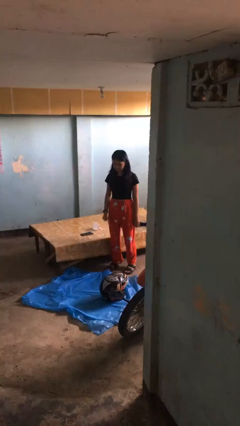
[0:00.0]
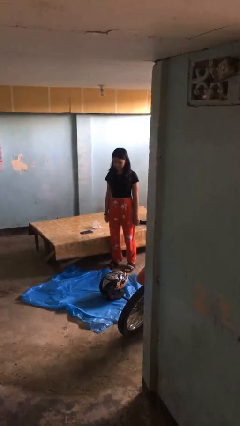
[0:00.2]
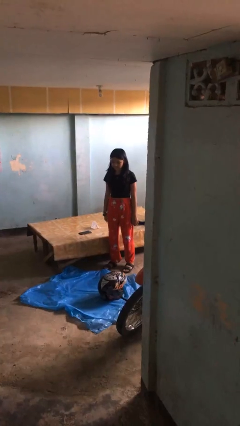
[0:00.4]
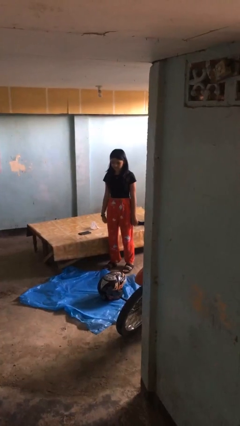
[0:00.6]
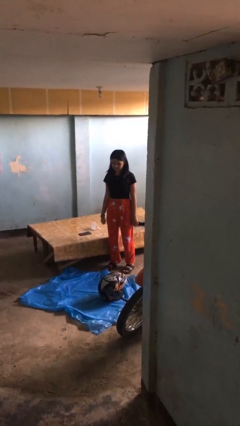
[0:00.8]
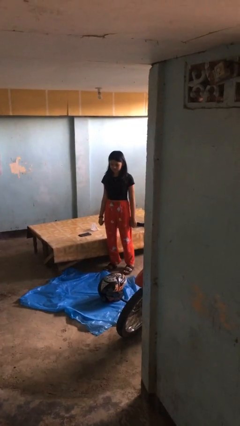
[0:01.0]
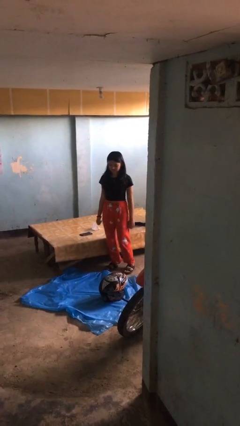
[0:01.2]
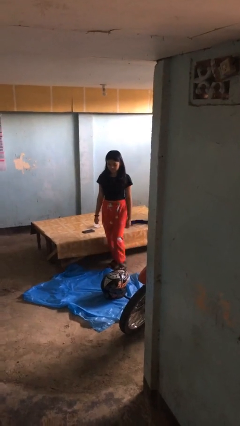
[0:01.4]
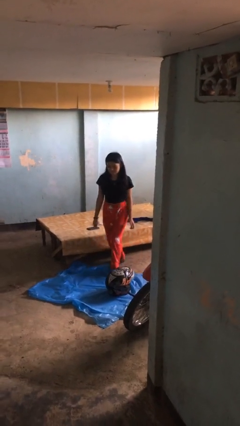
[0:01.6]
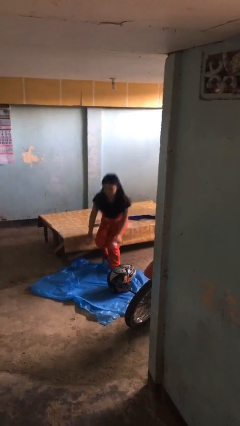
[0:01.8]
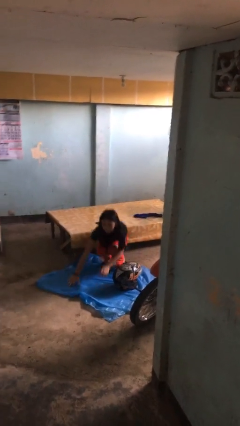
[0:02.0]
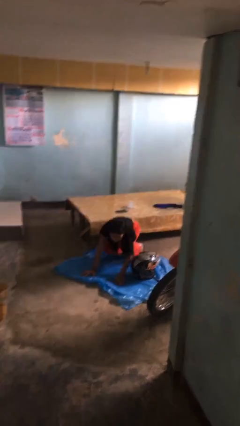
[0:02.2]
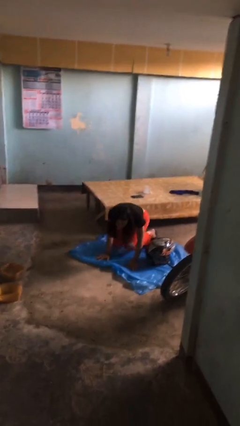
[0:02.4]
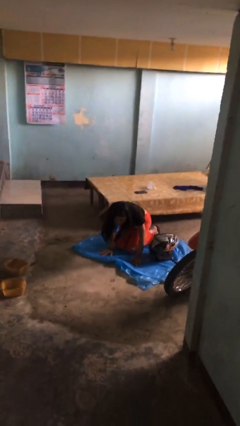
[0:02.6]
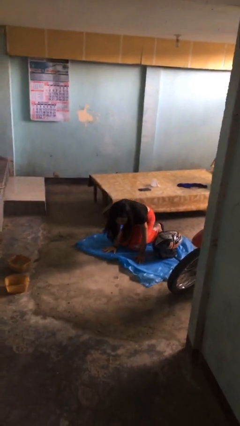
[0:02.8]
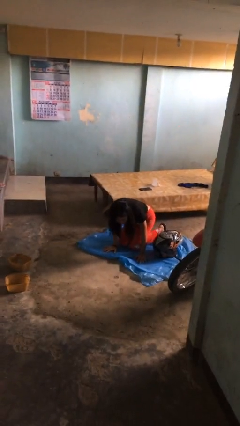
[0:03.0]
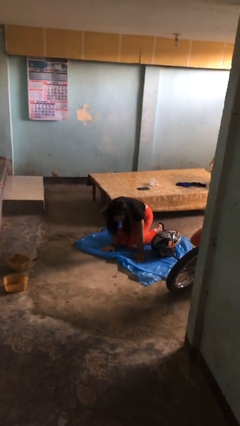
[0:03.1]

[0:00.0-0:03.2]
person trips on object on floor

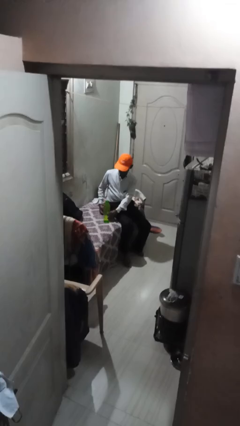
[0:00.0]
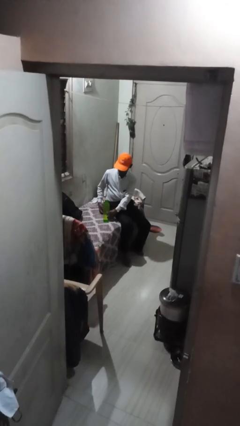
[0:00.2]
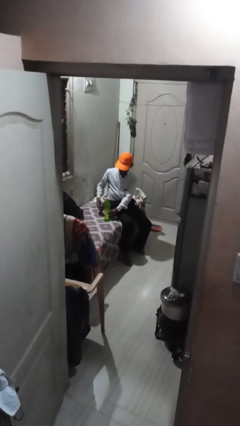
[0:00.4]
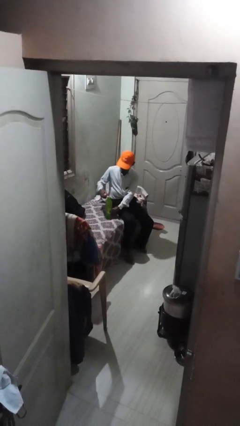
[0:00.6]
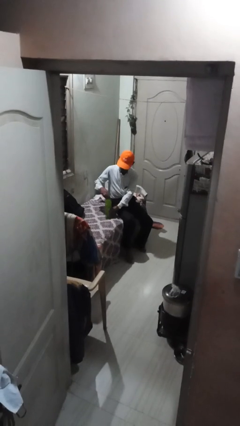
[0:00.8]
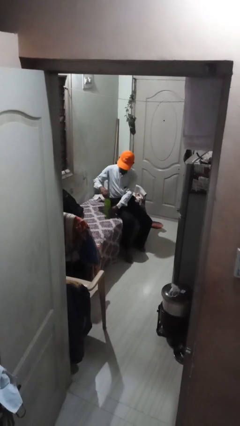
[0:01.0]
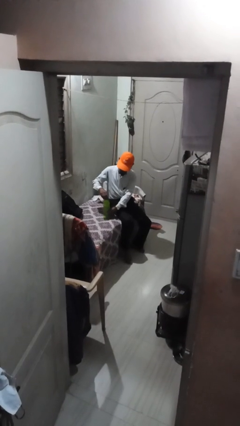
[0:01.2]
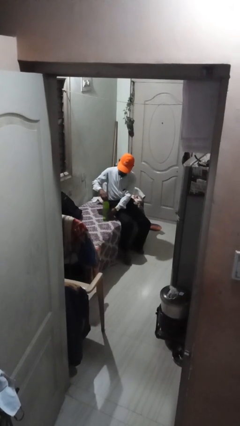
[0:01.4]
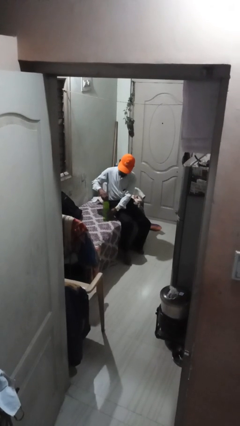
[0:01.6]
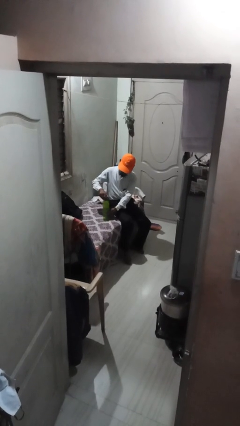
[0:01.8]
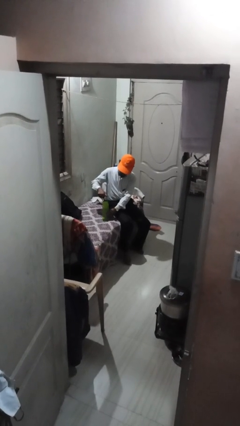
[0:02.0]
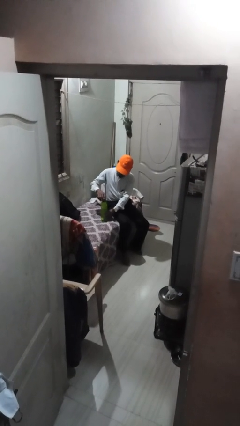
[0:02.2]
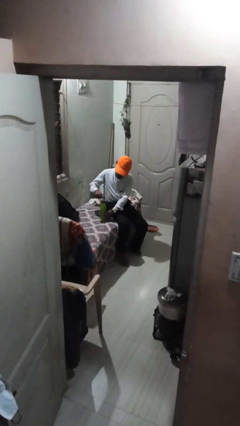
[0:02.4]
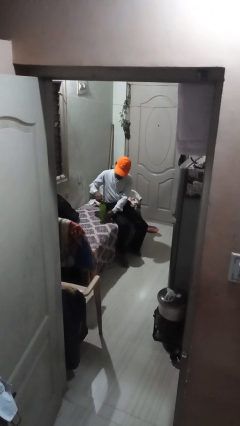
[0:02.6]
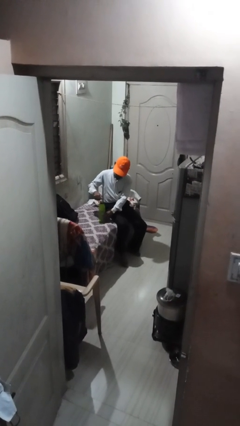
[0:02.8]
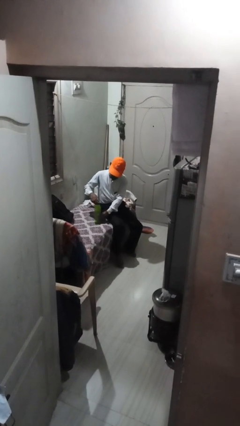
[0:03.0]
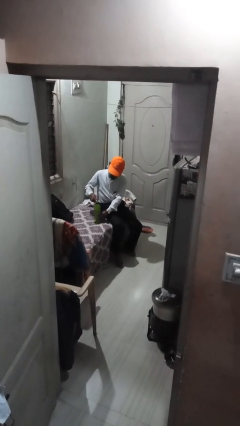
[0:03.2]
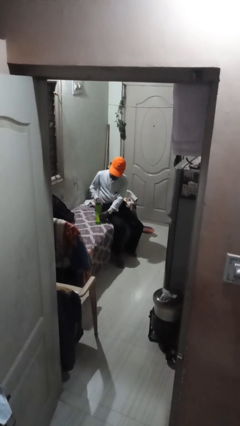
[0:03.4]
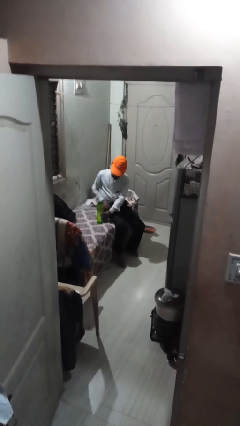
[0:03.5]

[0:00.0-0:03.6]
person screws lid to bottle

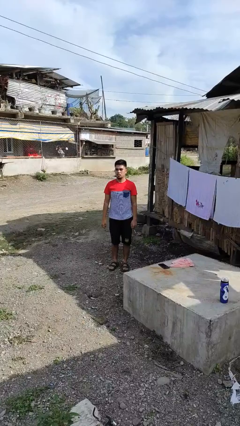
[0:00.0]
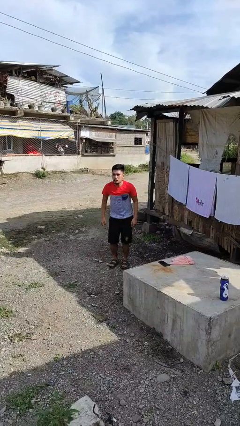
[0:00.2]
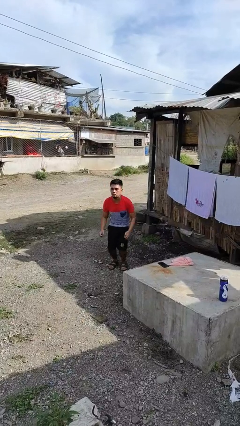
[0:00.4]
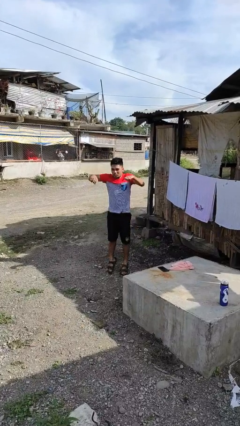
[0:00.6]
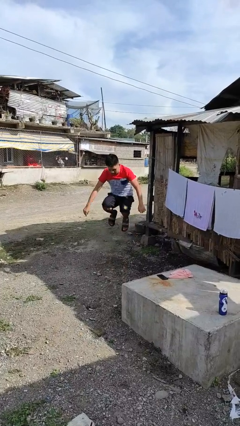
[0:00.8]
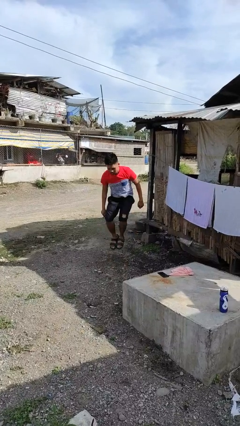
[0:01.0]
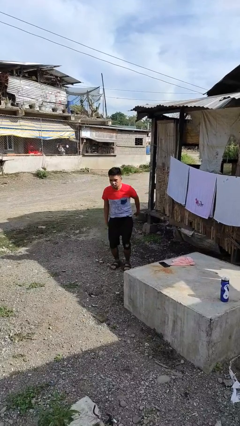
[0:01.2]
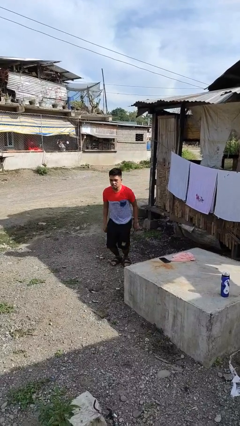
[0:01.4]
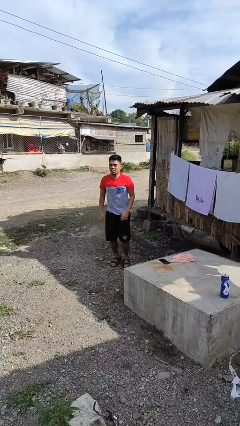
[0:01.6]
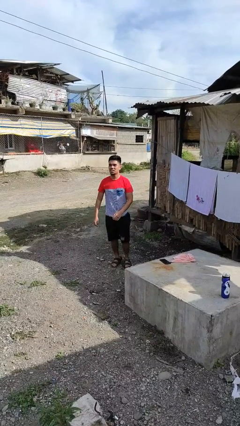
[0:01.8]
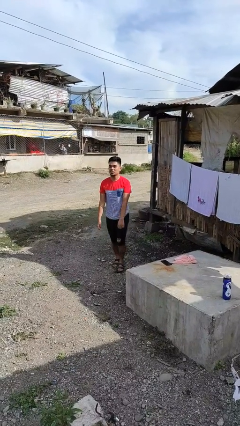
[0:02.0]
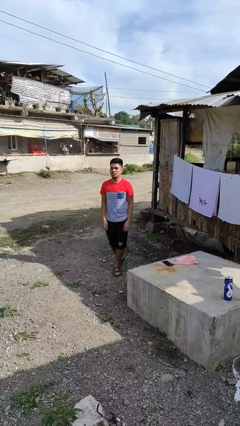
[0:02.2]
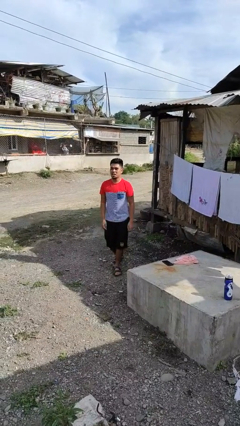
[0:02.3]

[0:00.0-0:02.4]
person jumps

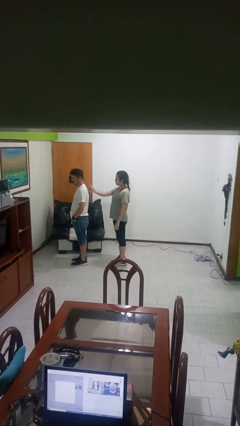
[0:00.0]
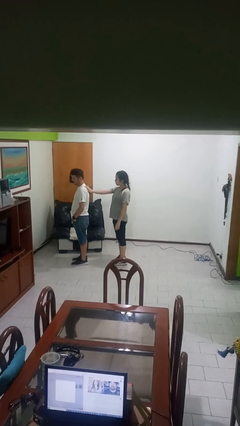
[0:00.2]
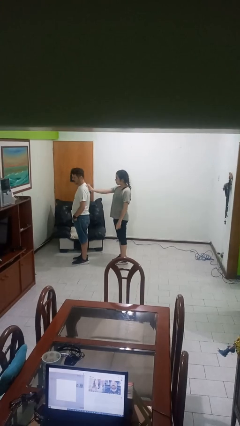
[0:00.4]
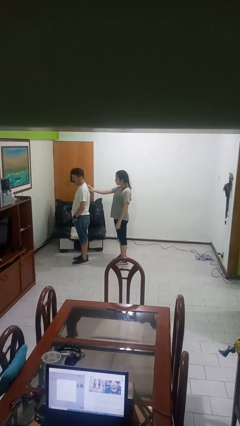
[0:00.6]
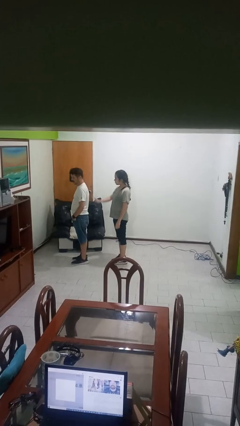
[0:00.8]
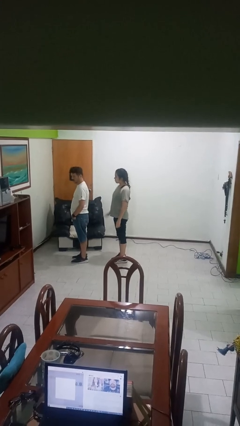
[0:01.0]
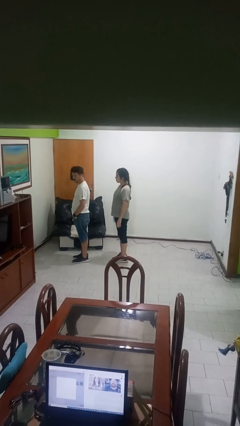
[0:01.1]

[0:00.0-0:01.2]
person touches back of person

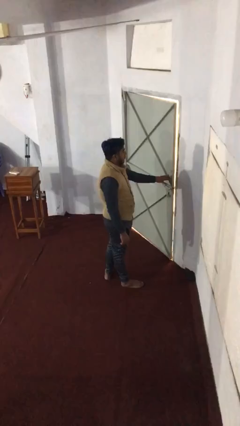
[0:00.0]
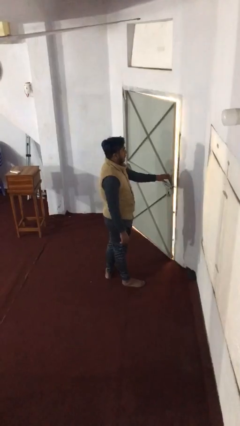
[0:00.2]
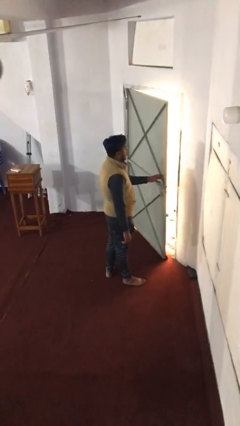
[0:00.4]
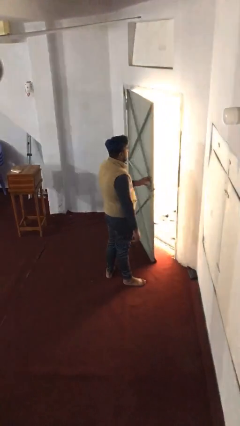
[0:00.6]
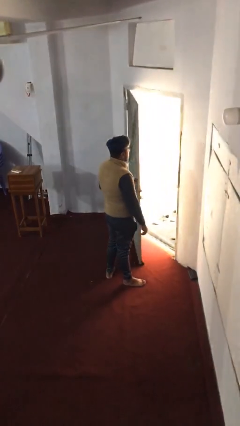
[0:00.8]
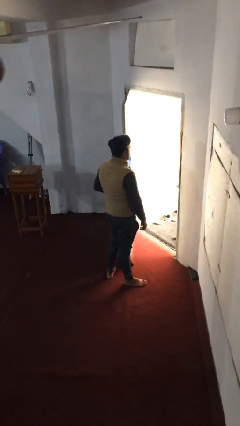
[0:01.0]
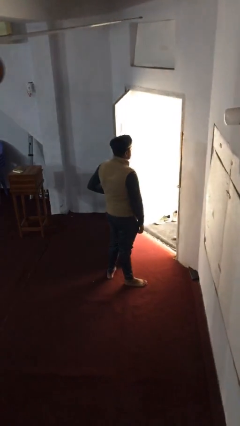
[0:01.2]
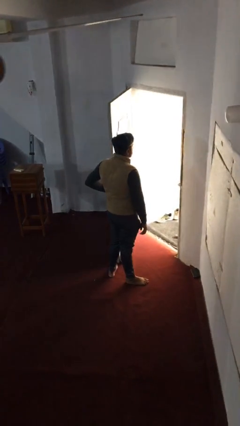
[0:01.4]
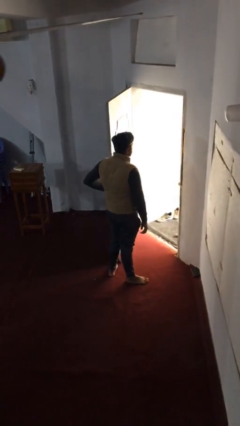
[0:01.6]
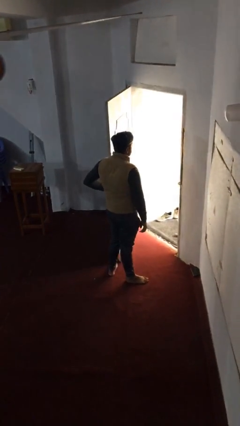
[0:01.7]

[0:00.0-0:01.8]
person opens facility door

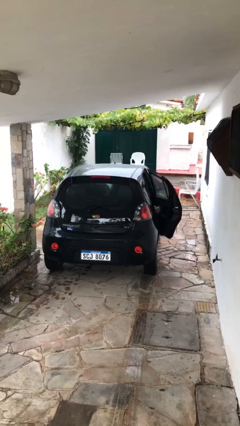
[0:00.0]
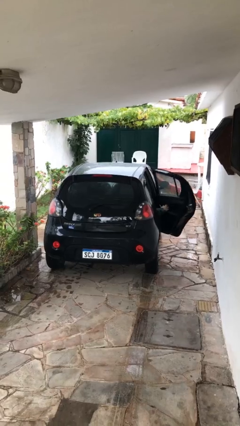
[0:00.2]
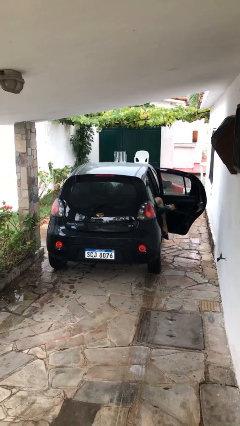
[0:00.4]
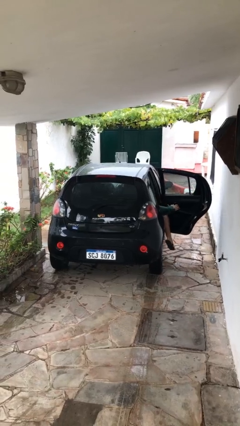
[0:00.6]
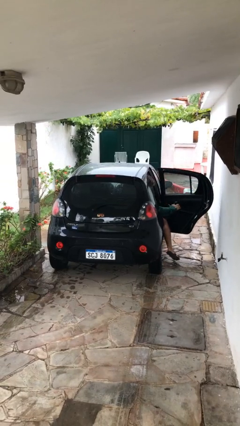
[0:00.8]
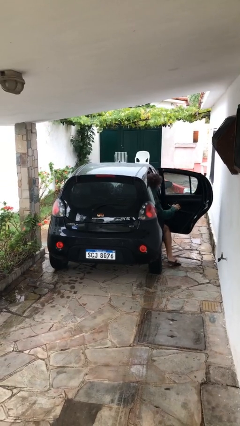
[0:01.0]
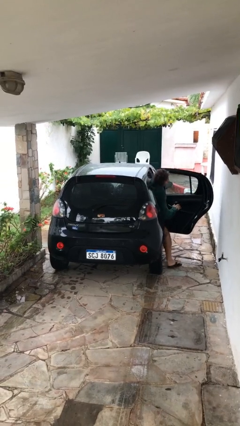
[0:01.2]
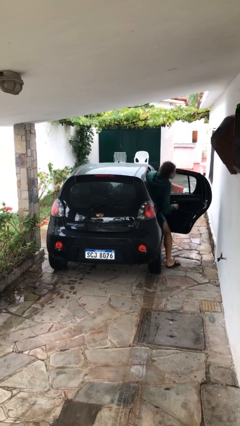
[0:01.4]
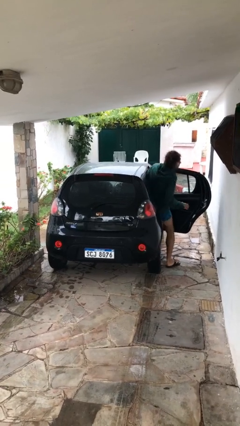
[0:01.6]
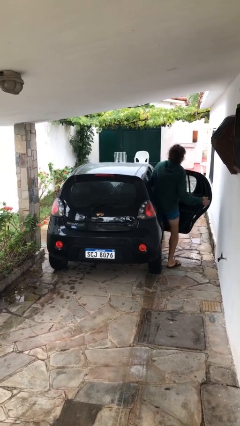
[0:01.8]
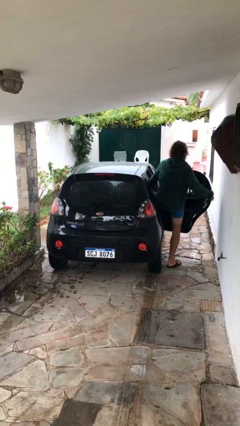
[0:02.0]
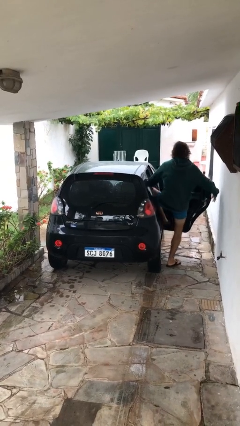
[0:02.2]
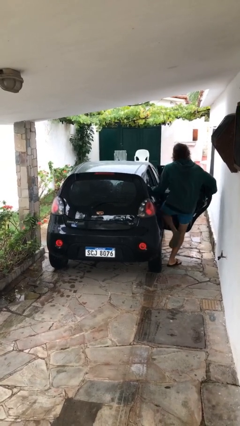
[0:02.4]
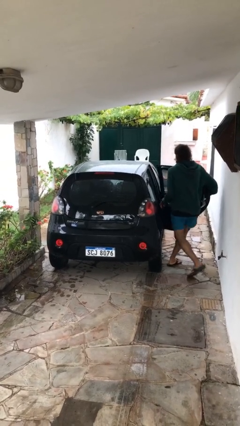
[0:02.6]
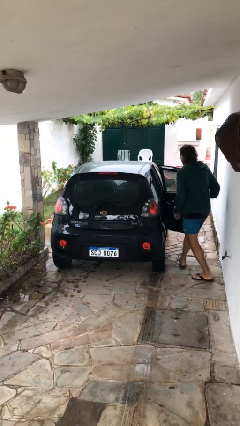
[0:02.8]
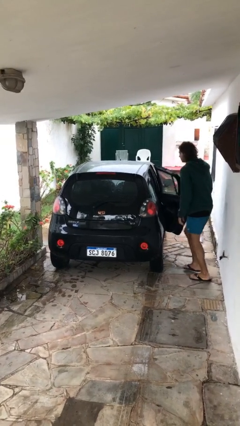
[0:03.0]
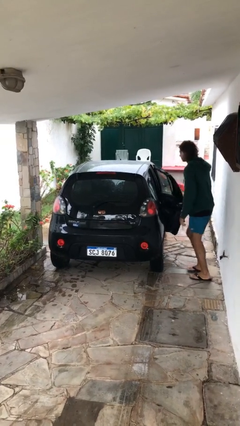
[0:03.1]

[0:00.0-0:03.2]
car drops off person

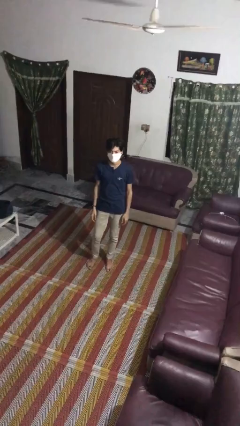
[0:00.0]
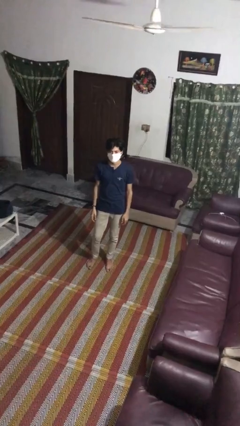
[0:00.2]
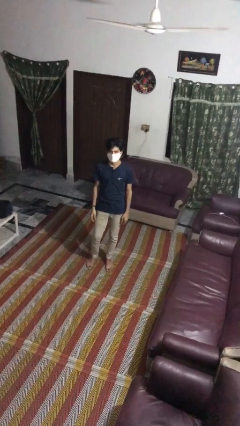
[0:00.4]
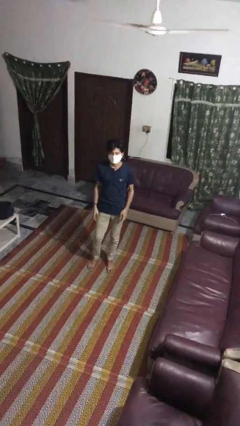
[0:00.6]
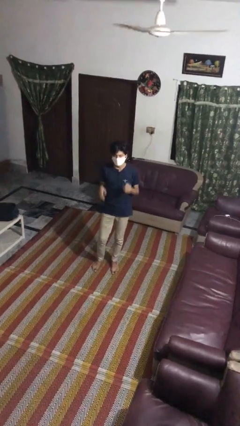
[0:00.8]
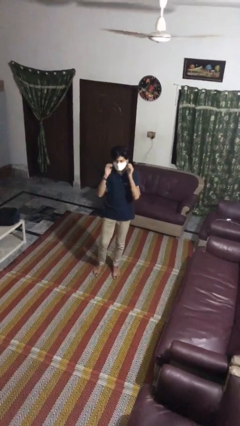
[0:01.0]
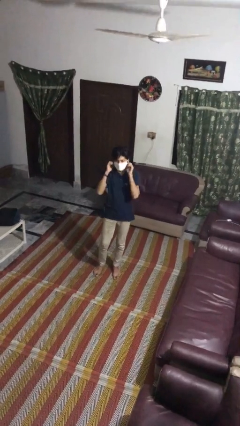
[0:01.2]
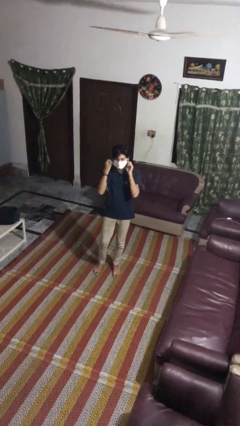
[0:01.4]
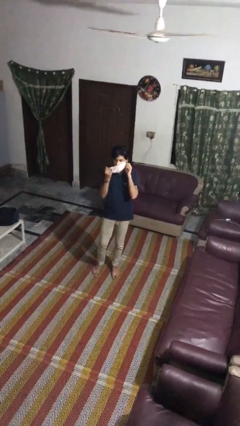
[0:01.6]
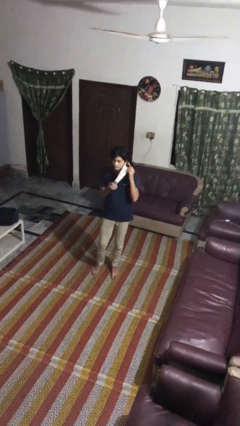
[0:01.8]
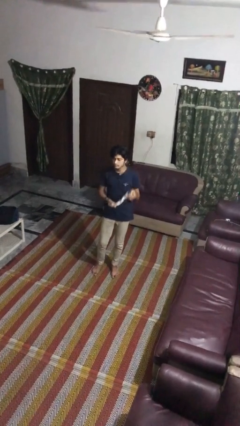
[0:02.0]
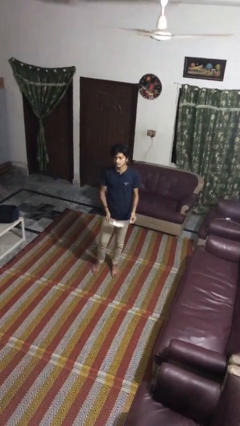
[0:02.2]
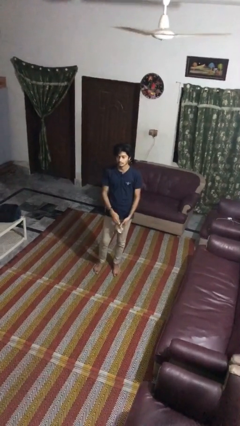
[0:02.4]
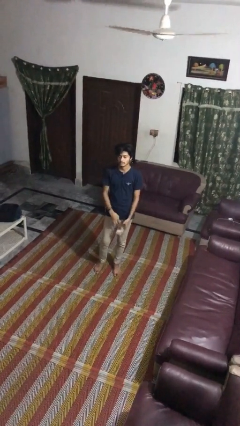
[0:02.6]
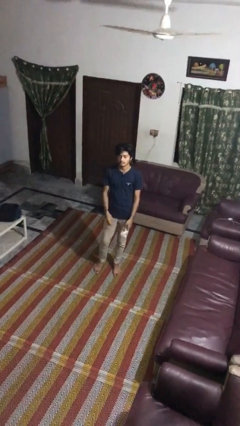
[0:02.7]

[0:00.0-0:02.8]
person takes off facemask
